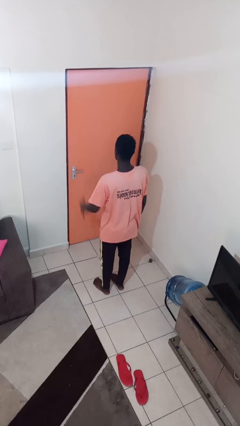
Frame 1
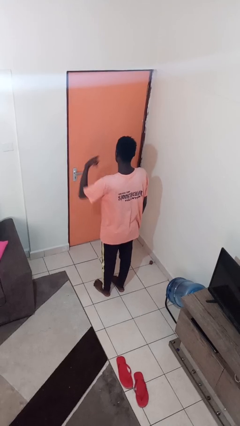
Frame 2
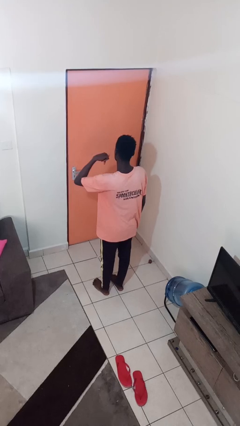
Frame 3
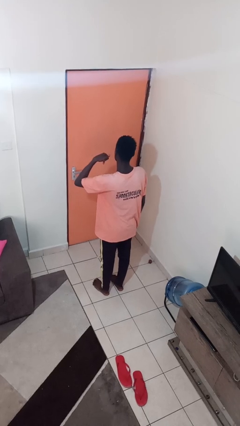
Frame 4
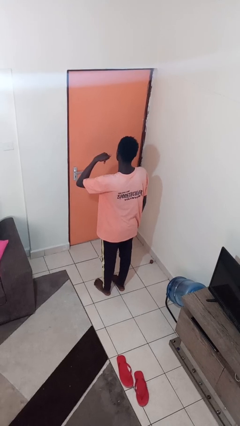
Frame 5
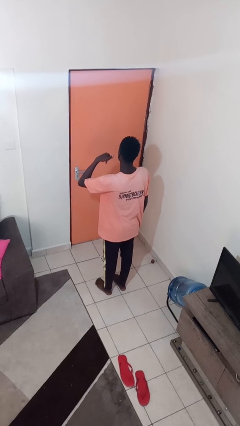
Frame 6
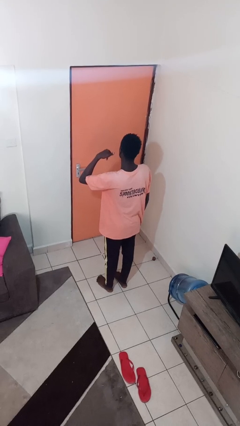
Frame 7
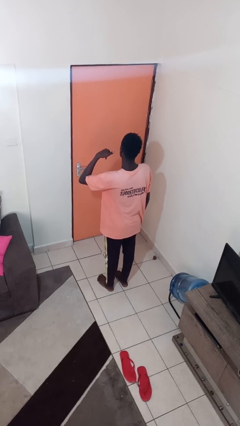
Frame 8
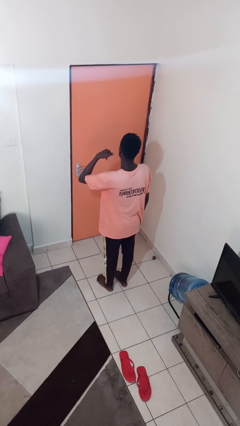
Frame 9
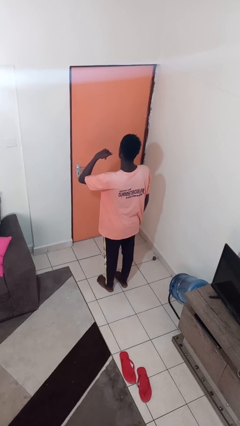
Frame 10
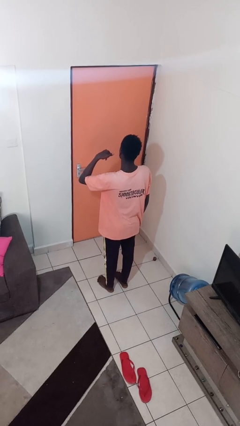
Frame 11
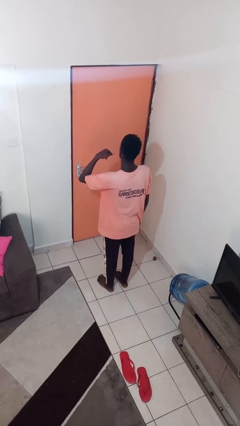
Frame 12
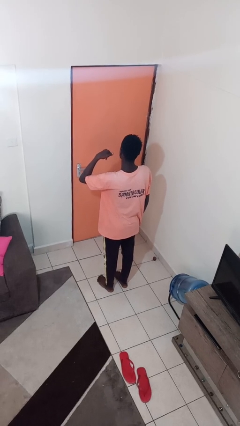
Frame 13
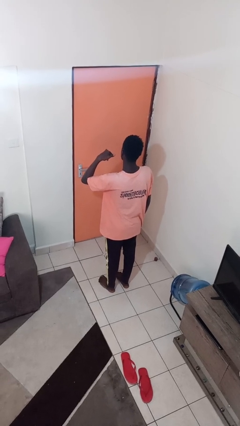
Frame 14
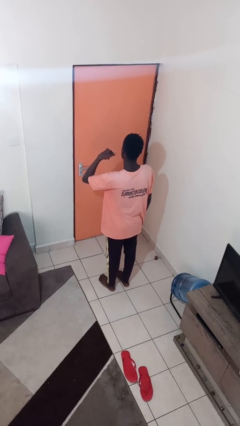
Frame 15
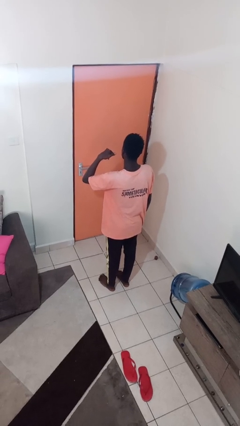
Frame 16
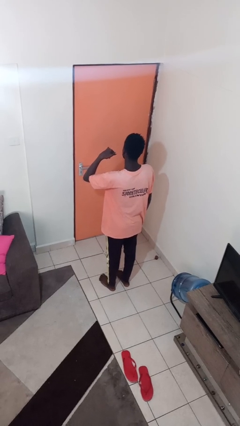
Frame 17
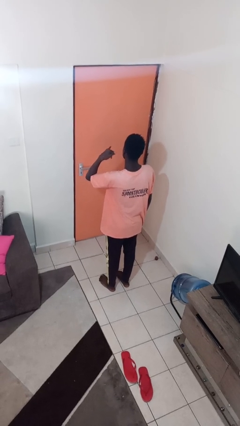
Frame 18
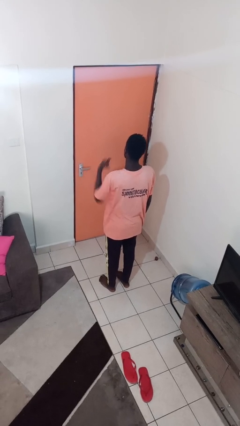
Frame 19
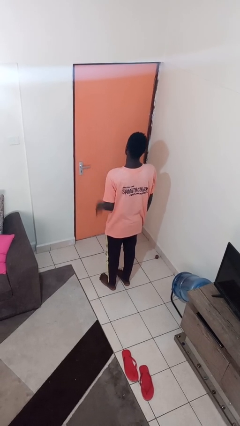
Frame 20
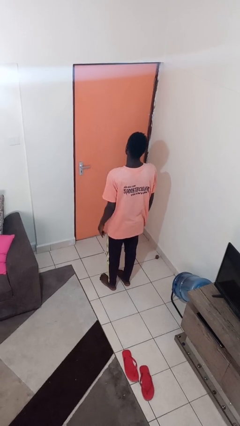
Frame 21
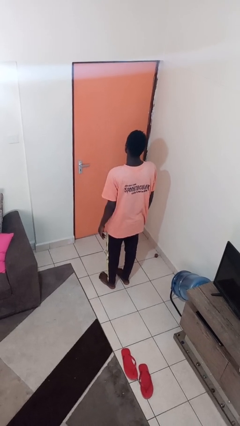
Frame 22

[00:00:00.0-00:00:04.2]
person gestures call me

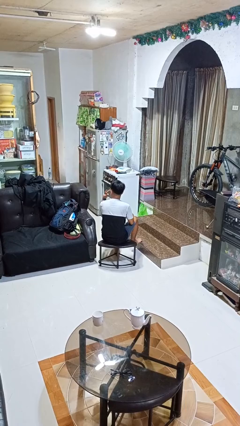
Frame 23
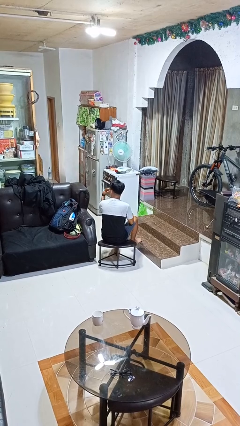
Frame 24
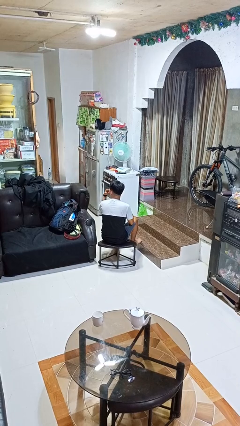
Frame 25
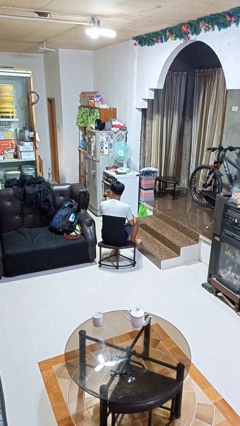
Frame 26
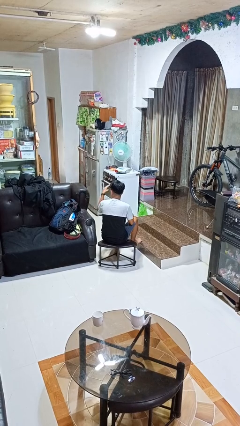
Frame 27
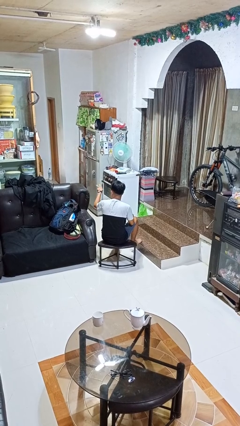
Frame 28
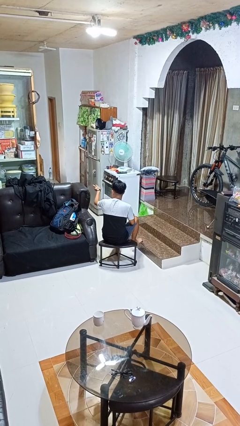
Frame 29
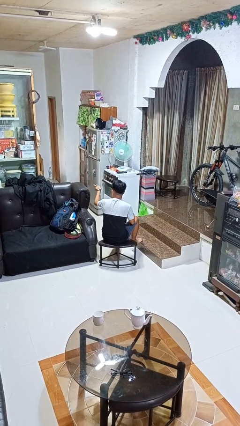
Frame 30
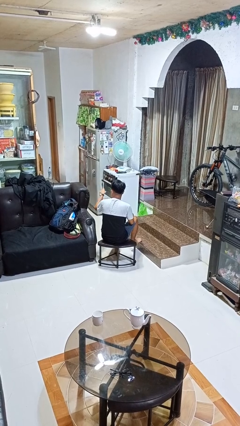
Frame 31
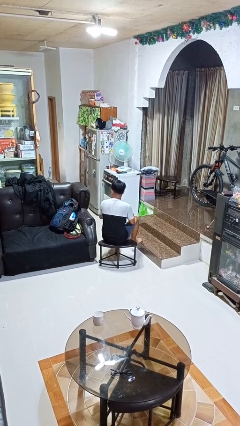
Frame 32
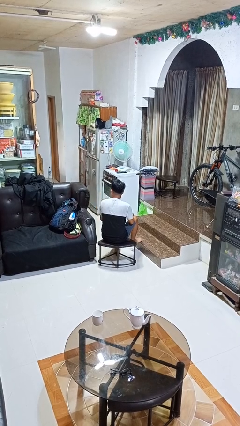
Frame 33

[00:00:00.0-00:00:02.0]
person gestures watch closely

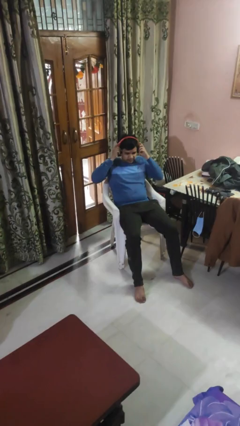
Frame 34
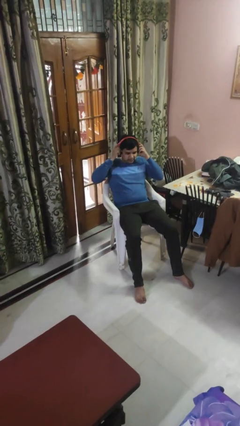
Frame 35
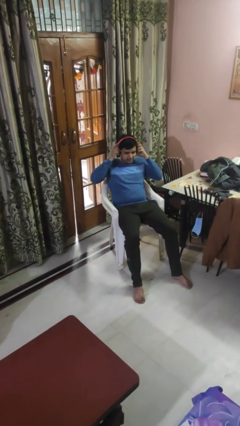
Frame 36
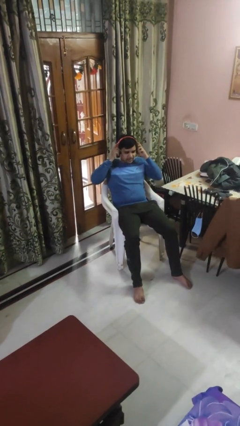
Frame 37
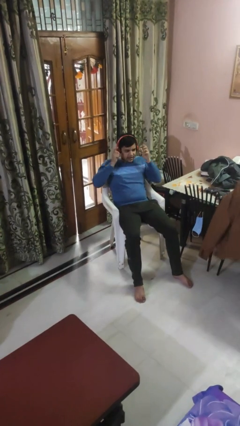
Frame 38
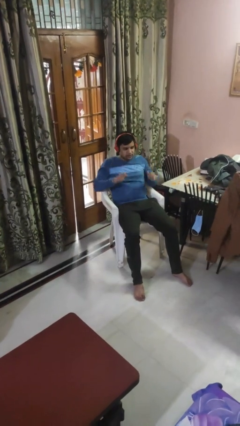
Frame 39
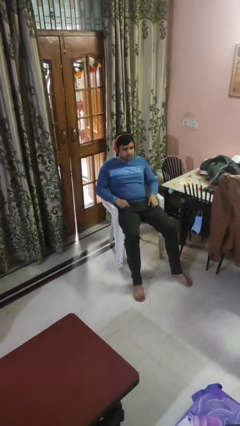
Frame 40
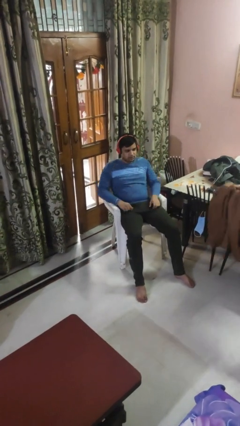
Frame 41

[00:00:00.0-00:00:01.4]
person puts on headphones

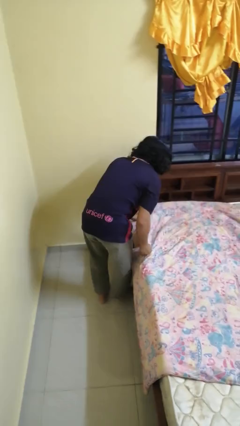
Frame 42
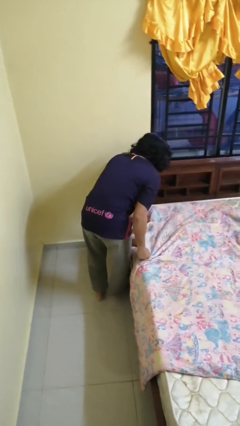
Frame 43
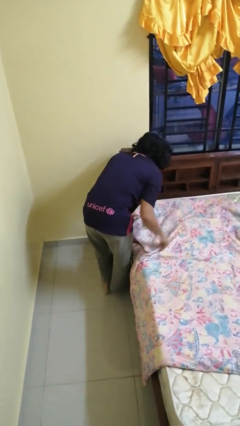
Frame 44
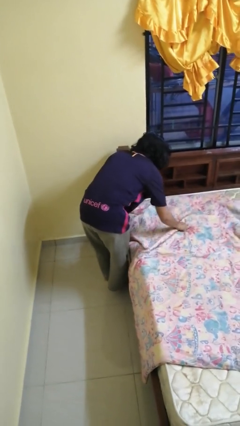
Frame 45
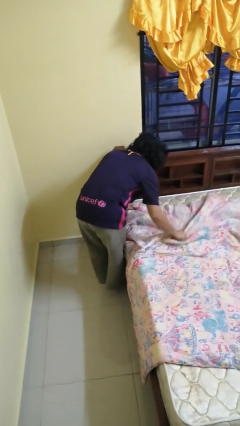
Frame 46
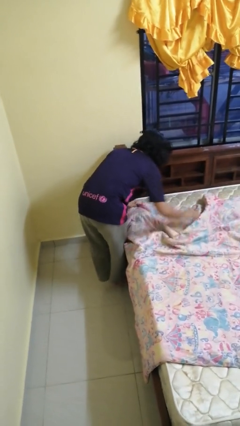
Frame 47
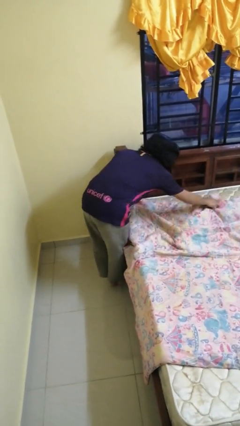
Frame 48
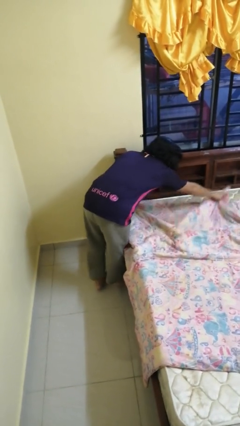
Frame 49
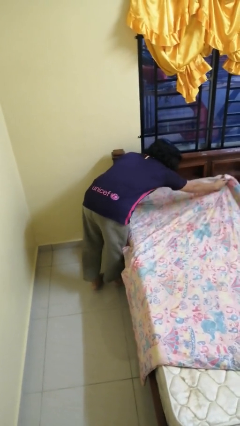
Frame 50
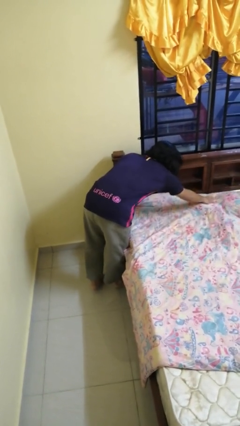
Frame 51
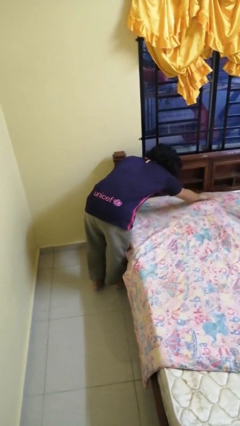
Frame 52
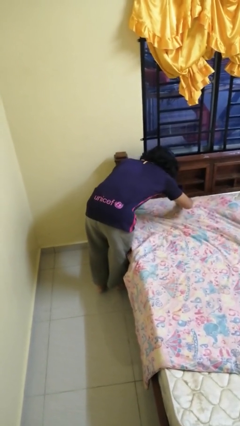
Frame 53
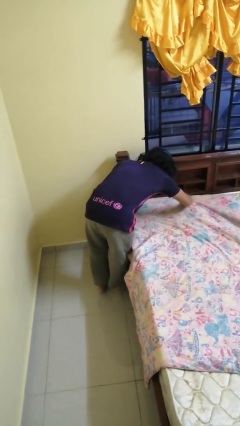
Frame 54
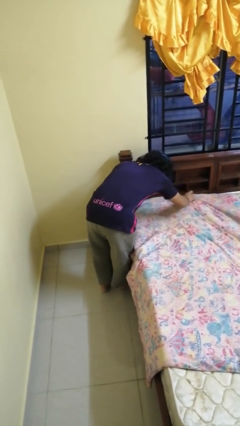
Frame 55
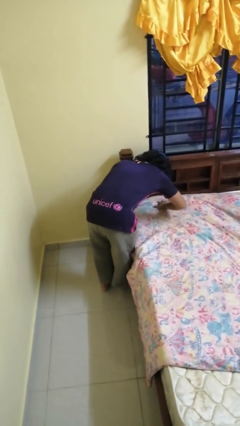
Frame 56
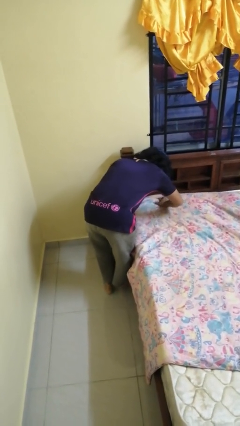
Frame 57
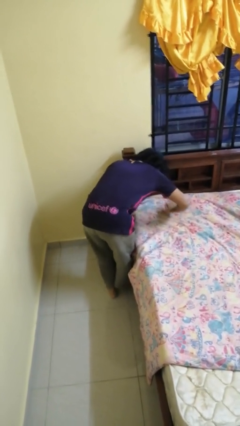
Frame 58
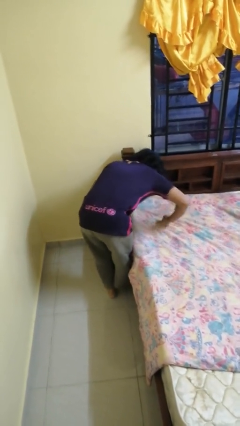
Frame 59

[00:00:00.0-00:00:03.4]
person makes bed

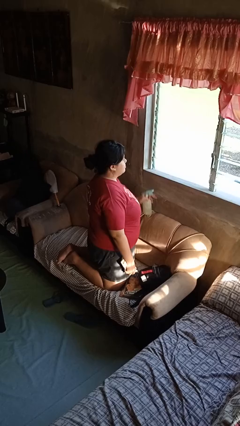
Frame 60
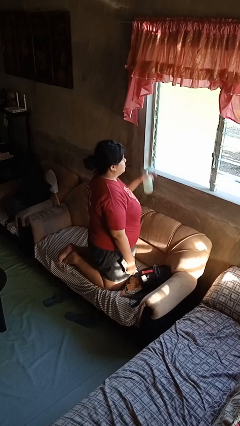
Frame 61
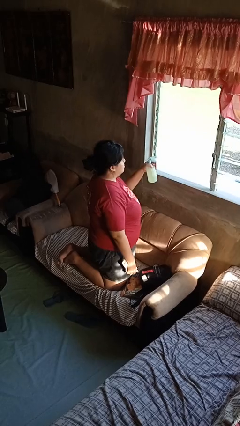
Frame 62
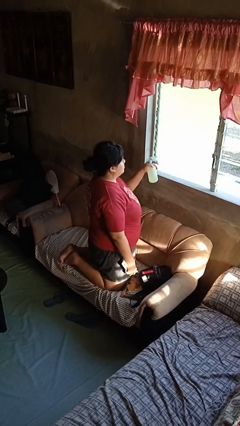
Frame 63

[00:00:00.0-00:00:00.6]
person sprays from bottle

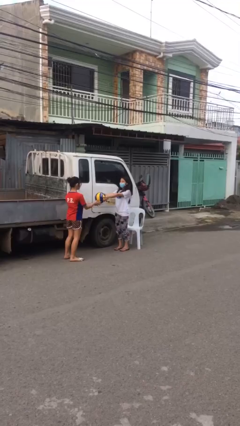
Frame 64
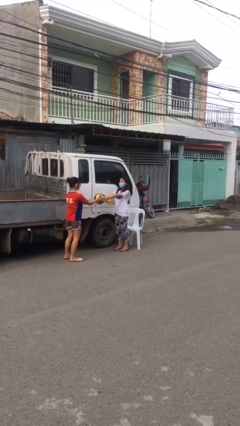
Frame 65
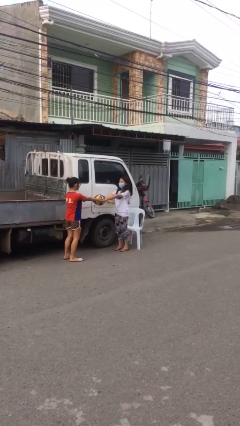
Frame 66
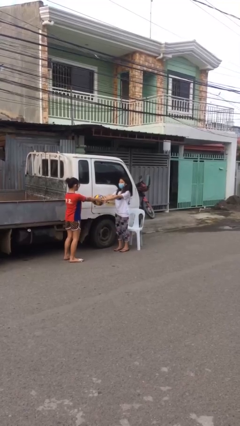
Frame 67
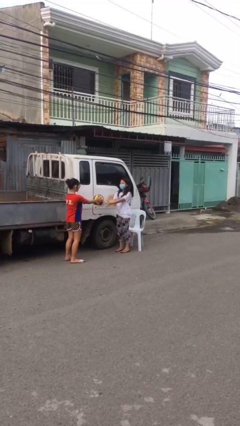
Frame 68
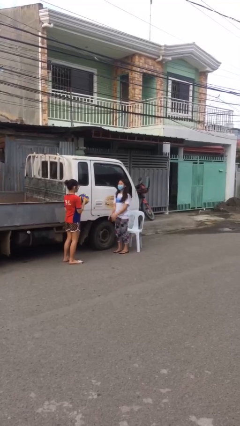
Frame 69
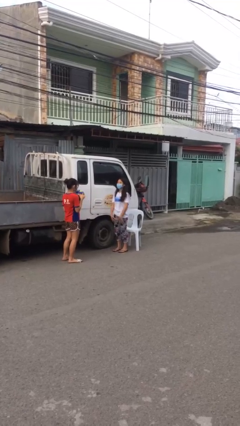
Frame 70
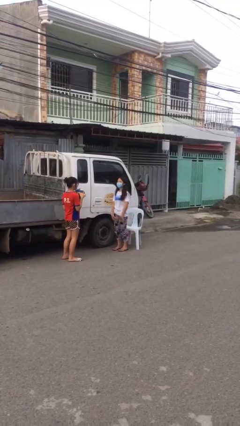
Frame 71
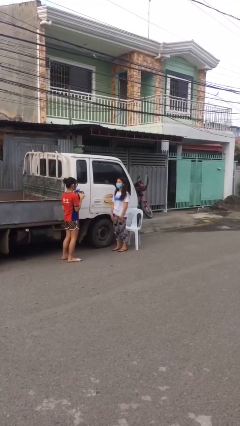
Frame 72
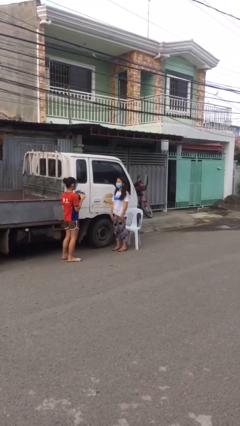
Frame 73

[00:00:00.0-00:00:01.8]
person transfers object to person

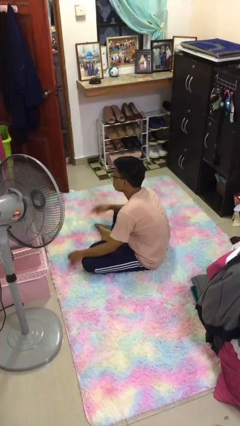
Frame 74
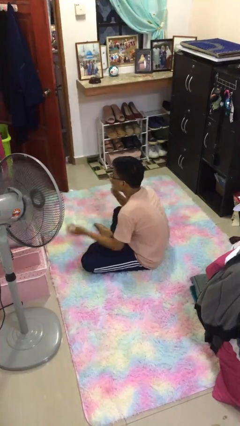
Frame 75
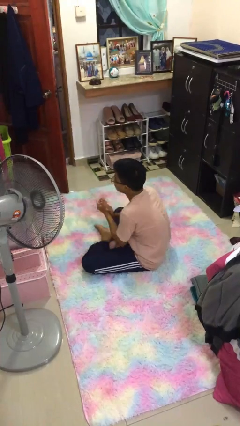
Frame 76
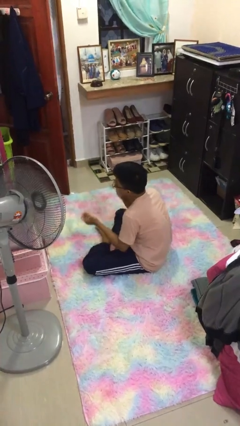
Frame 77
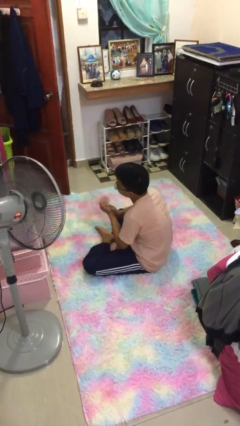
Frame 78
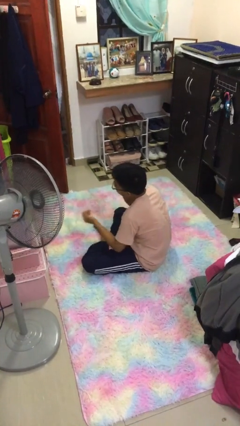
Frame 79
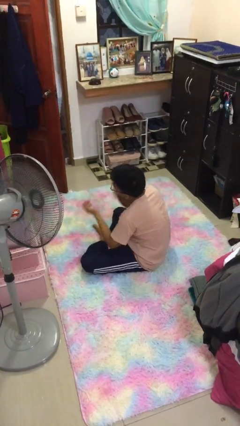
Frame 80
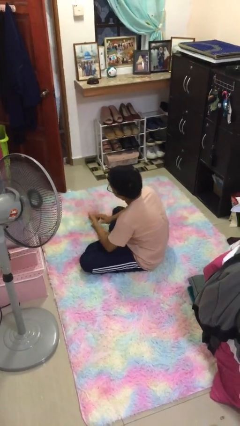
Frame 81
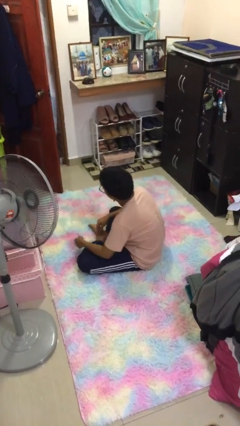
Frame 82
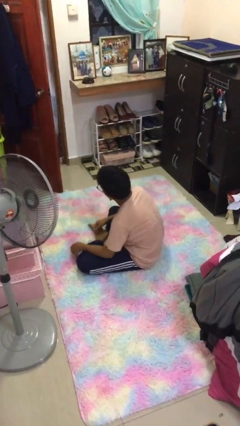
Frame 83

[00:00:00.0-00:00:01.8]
person claps hands

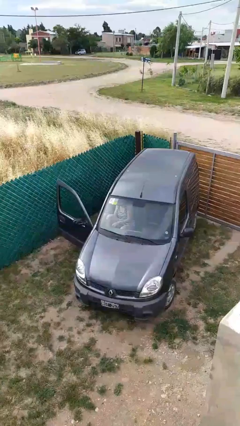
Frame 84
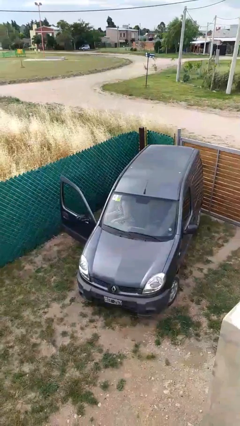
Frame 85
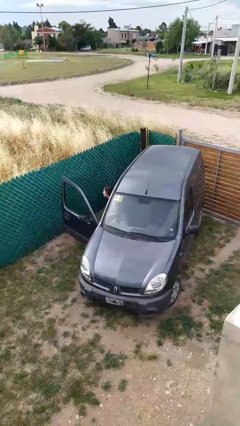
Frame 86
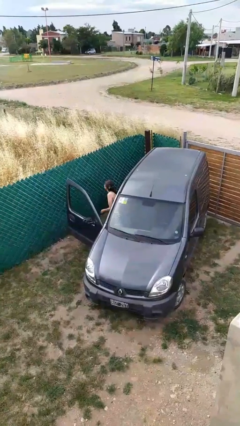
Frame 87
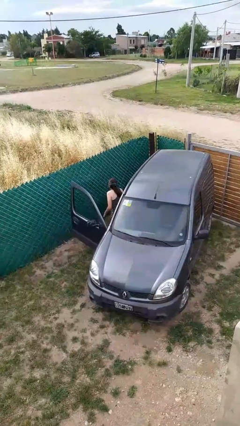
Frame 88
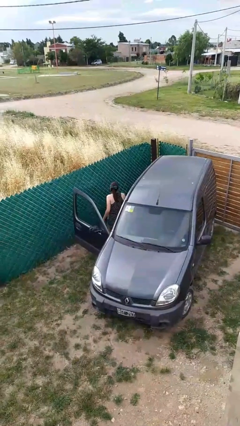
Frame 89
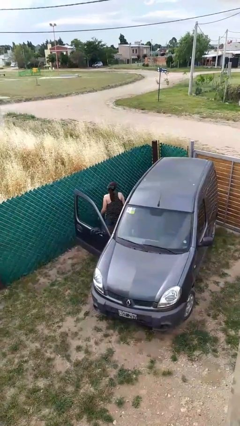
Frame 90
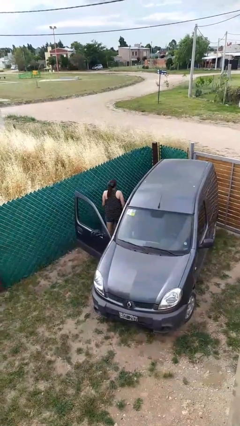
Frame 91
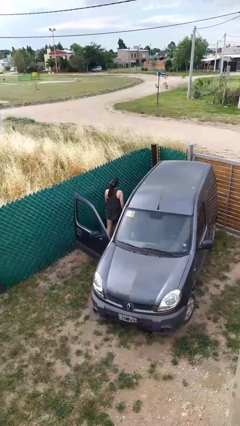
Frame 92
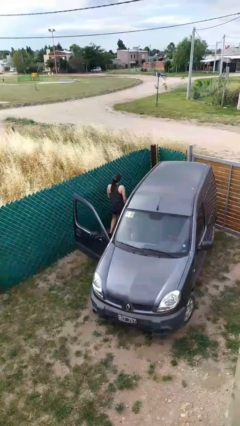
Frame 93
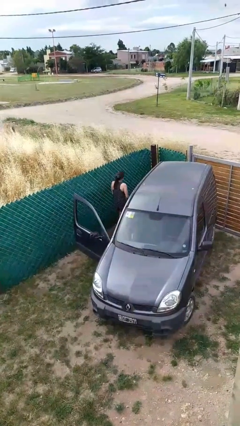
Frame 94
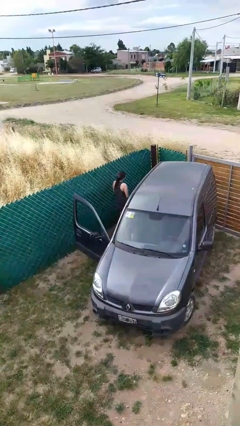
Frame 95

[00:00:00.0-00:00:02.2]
person exits car
